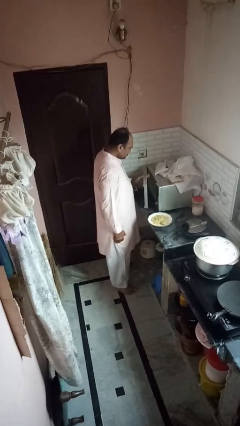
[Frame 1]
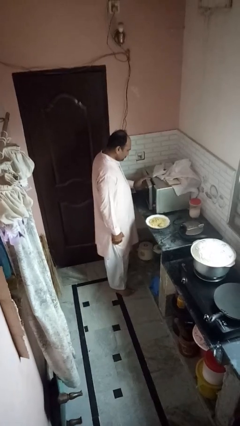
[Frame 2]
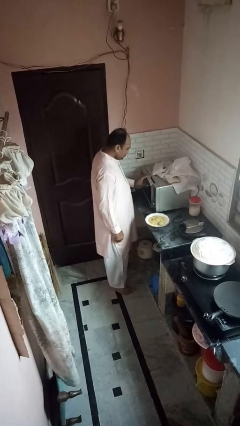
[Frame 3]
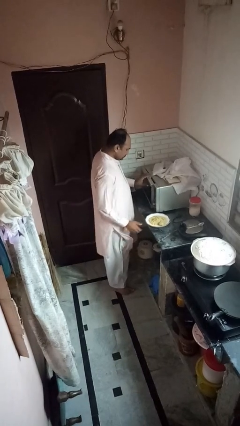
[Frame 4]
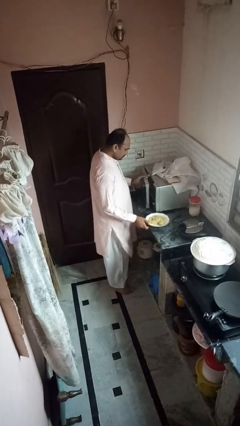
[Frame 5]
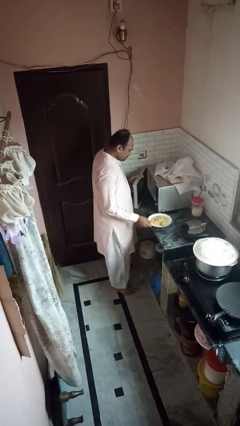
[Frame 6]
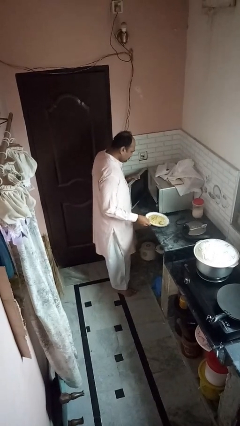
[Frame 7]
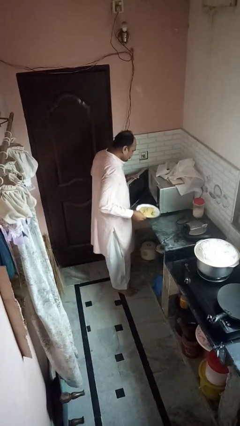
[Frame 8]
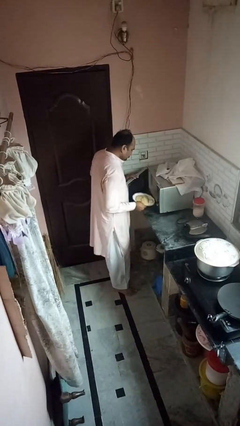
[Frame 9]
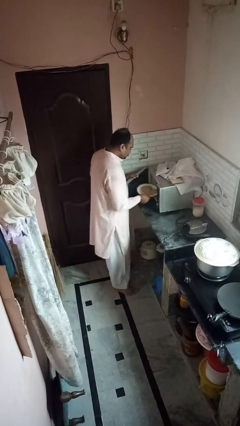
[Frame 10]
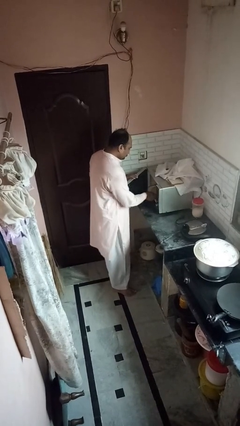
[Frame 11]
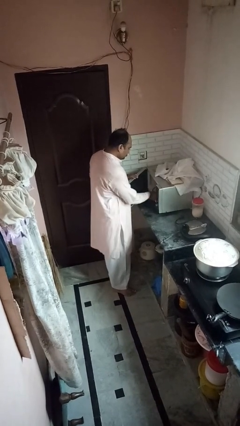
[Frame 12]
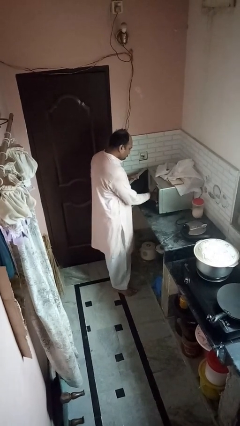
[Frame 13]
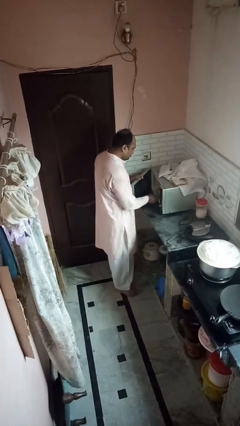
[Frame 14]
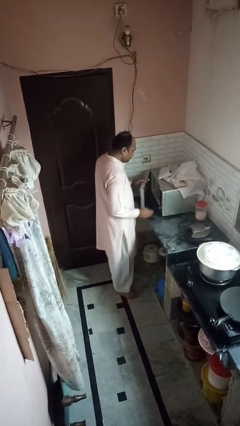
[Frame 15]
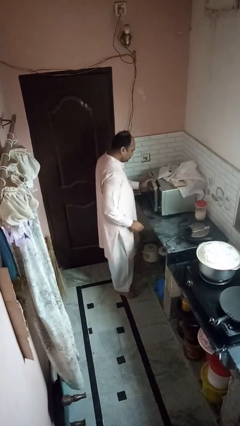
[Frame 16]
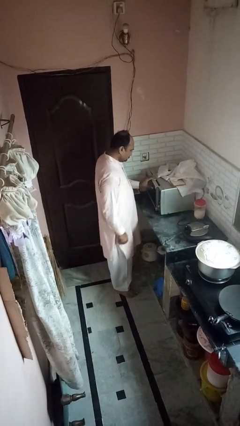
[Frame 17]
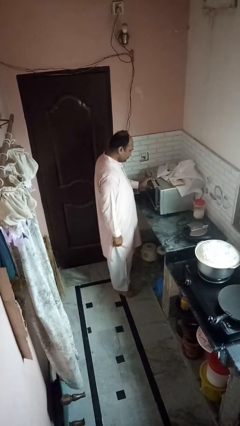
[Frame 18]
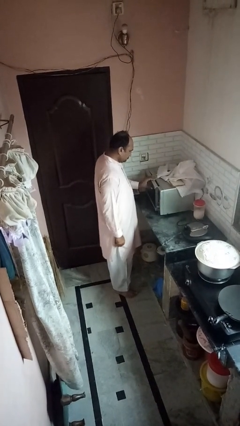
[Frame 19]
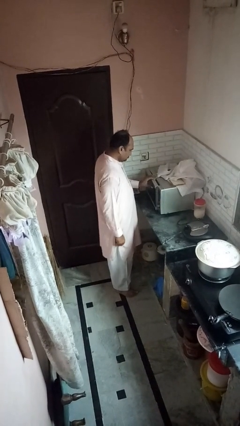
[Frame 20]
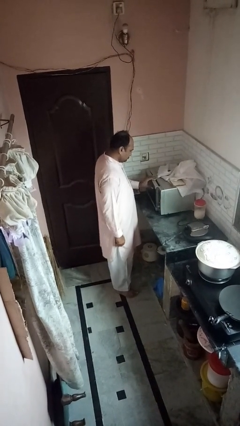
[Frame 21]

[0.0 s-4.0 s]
person puts object into oven

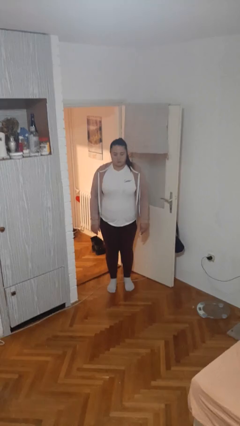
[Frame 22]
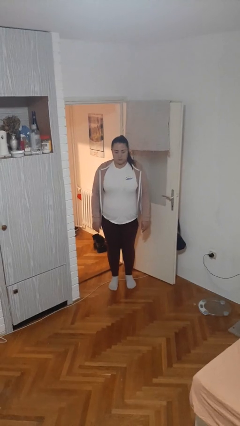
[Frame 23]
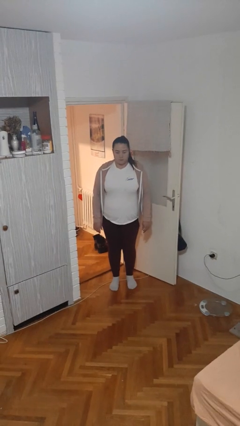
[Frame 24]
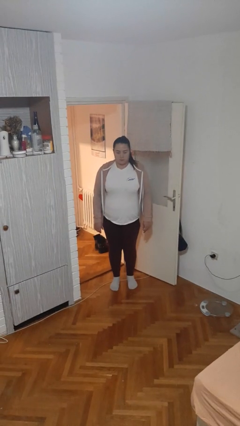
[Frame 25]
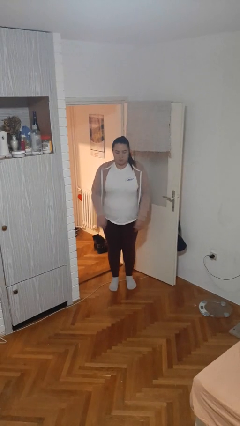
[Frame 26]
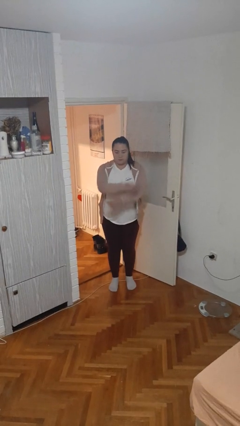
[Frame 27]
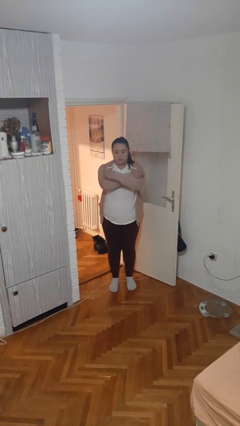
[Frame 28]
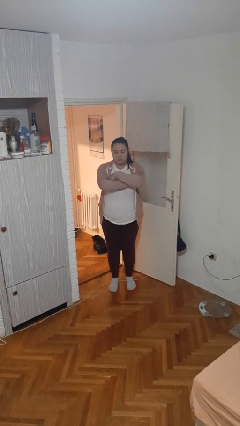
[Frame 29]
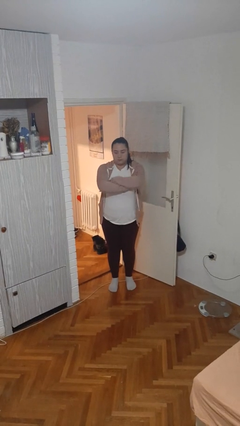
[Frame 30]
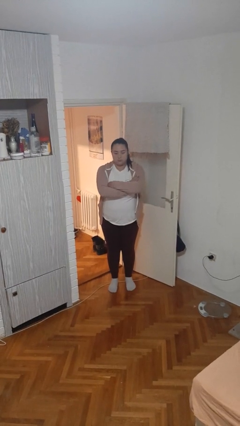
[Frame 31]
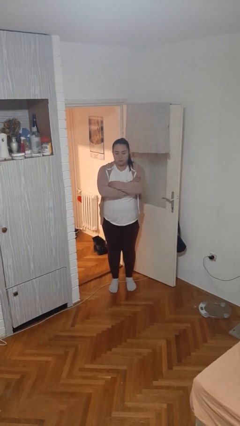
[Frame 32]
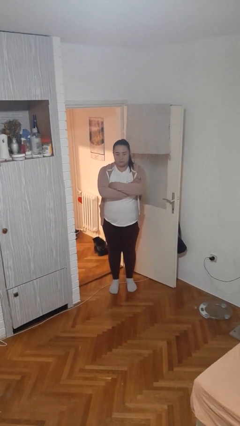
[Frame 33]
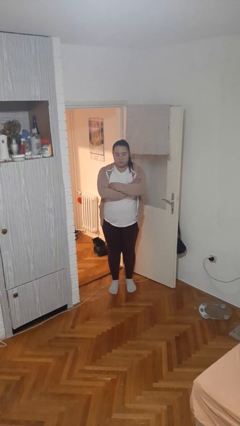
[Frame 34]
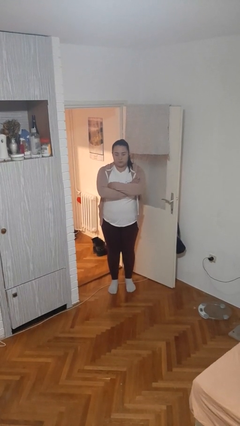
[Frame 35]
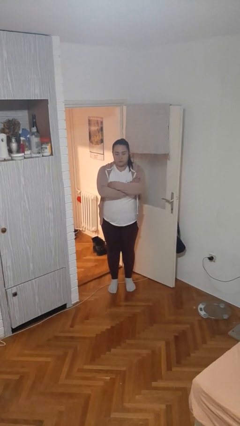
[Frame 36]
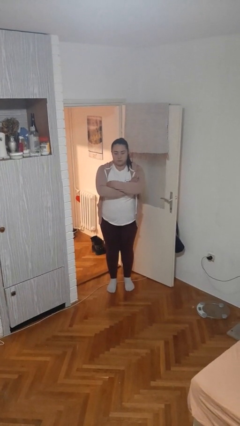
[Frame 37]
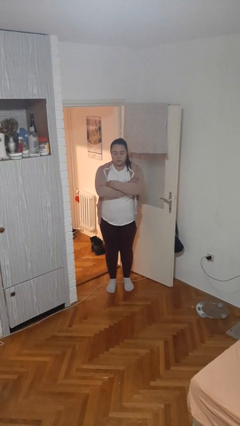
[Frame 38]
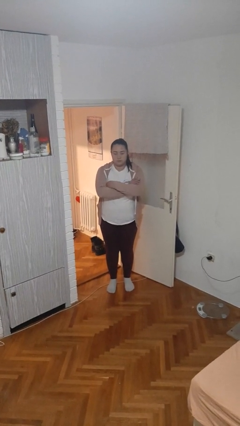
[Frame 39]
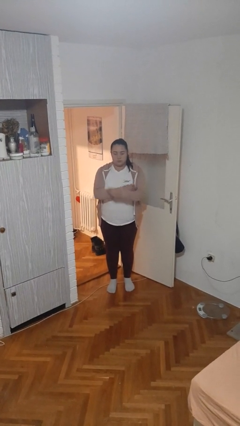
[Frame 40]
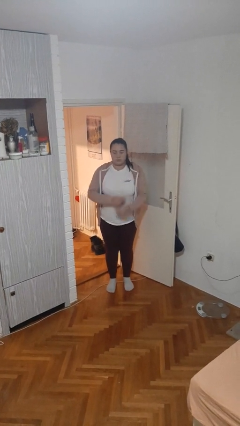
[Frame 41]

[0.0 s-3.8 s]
person crosses arms

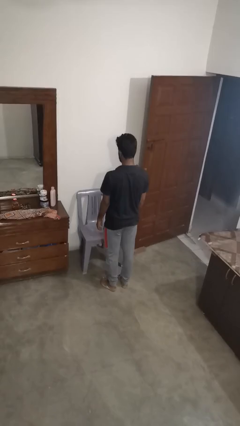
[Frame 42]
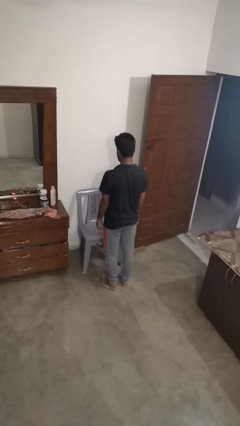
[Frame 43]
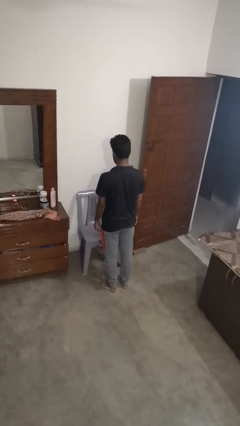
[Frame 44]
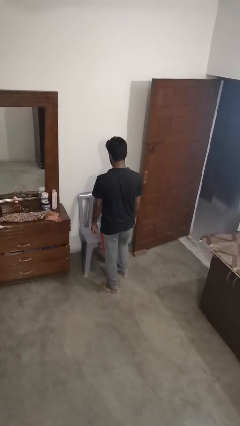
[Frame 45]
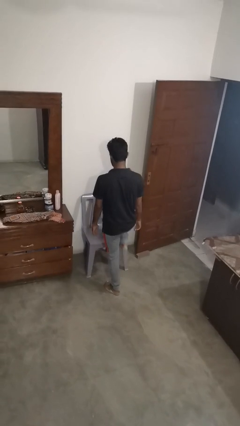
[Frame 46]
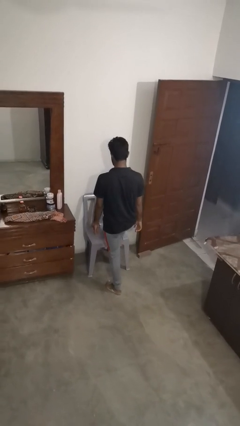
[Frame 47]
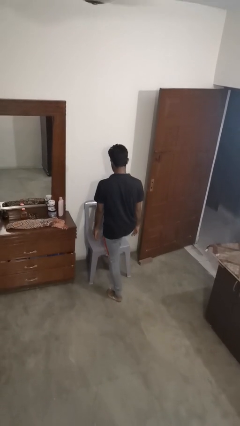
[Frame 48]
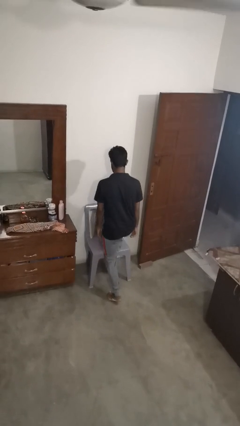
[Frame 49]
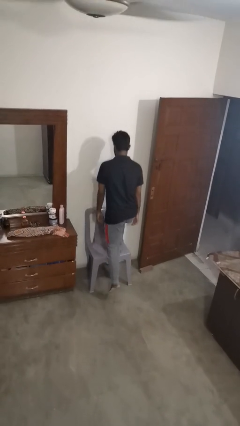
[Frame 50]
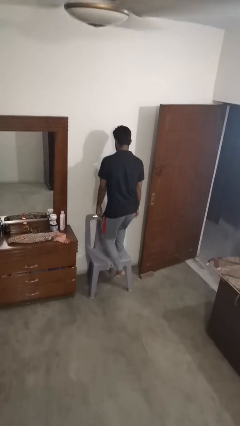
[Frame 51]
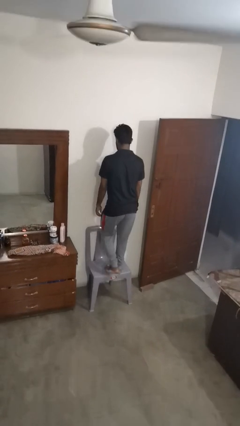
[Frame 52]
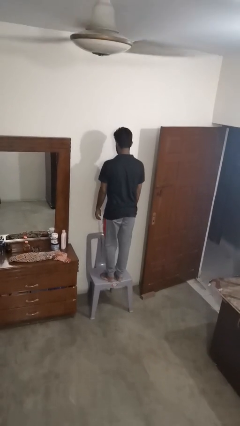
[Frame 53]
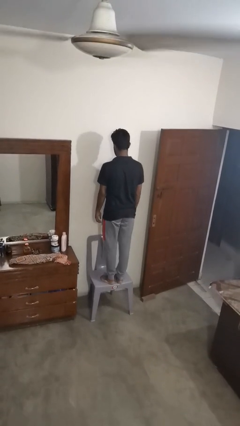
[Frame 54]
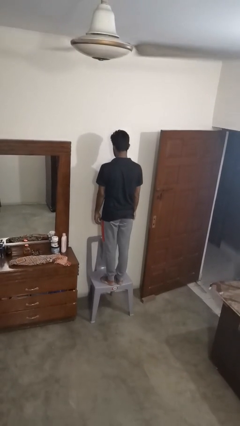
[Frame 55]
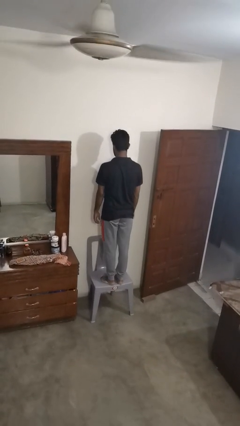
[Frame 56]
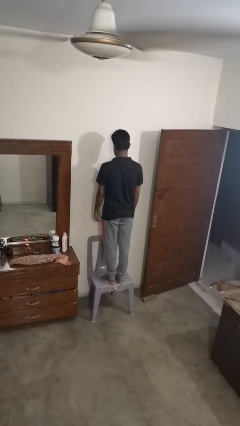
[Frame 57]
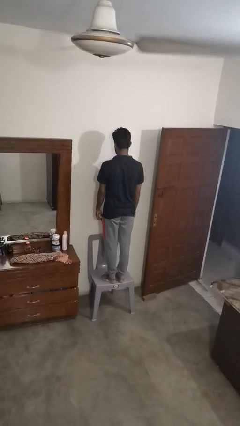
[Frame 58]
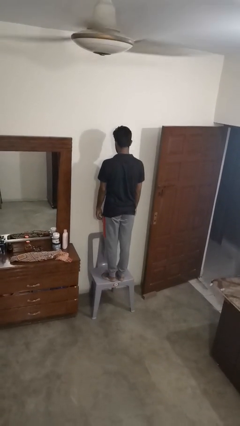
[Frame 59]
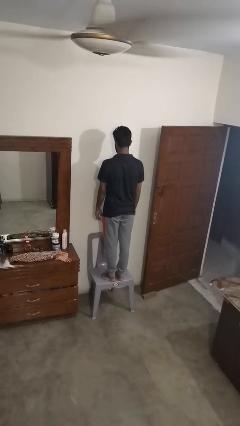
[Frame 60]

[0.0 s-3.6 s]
person climbs on chair

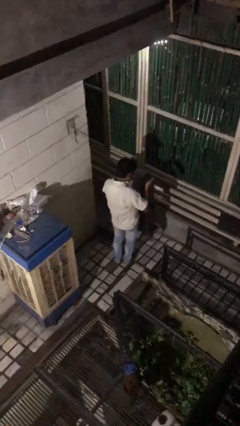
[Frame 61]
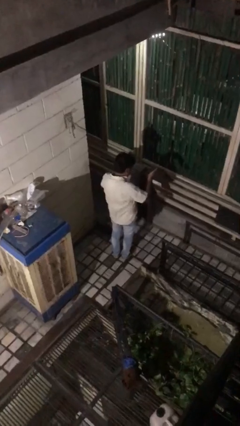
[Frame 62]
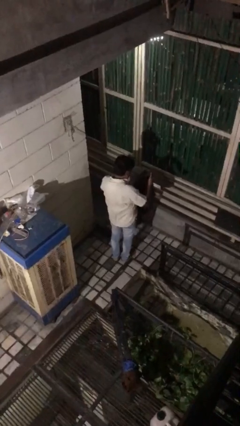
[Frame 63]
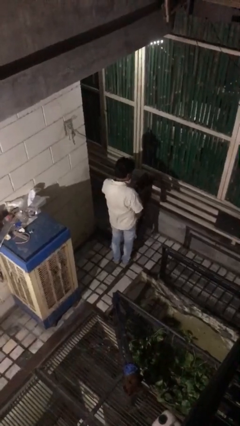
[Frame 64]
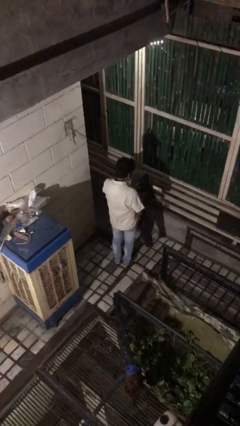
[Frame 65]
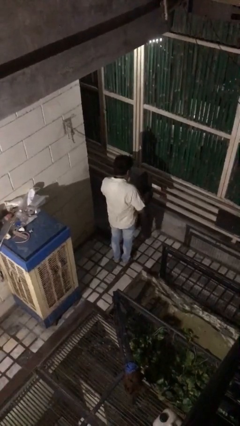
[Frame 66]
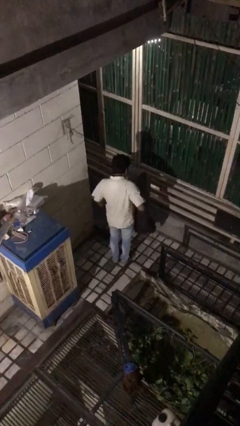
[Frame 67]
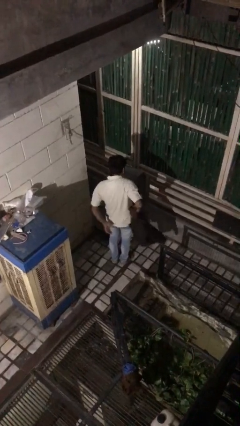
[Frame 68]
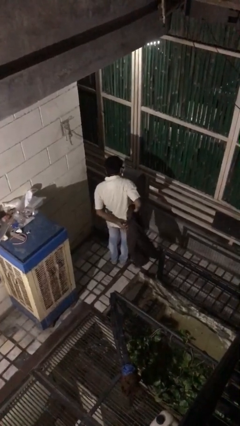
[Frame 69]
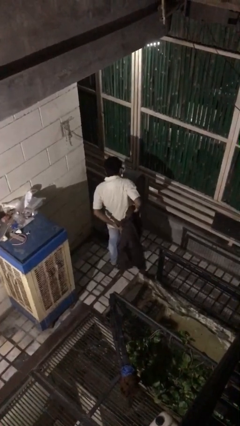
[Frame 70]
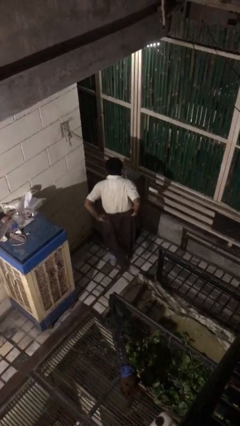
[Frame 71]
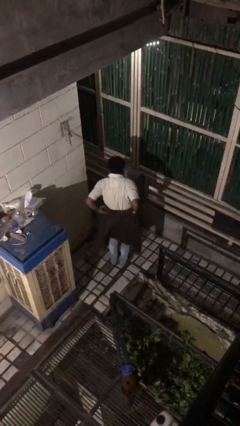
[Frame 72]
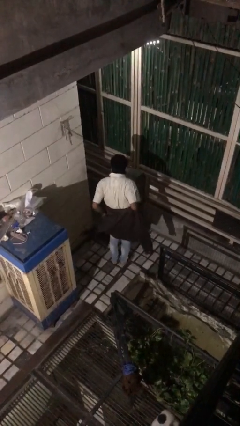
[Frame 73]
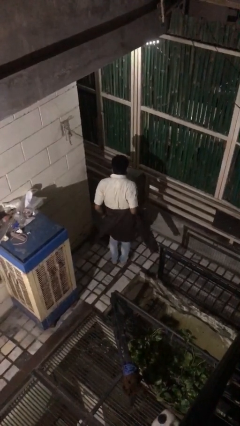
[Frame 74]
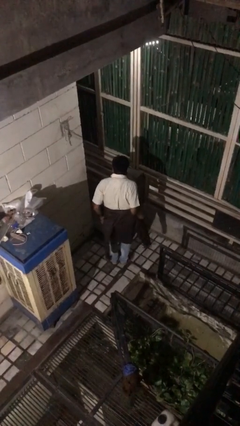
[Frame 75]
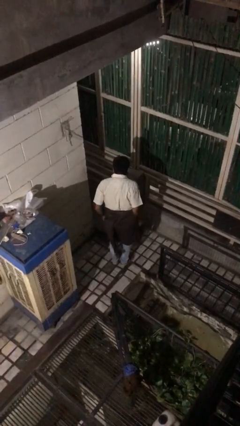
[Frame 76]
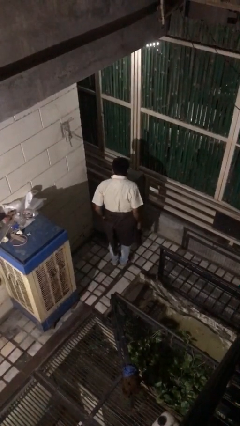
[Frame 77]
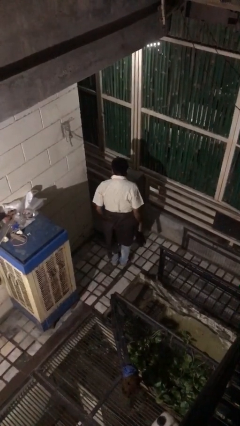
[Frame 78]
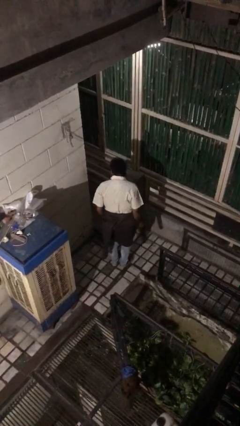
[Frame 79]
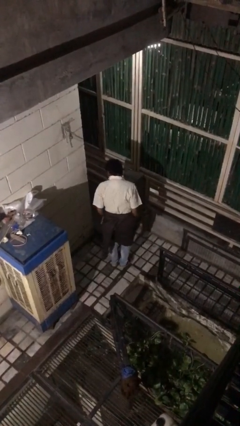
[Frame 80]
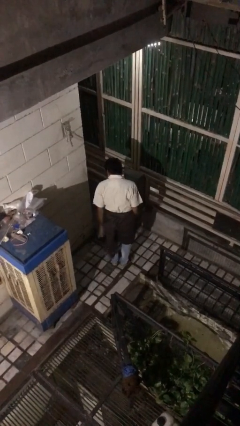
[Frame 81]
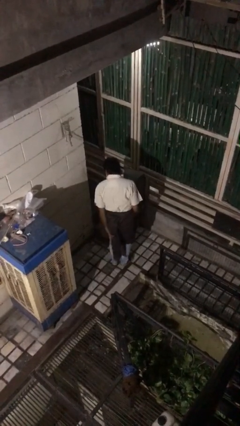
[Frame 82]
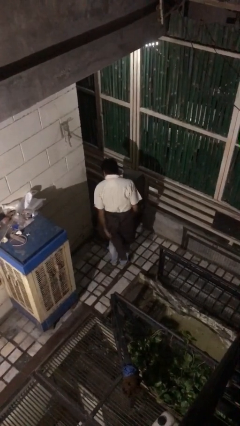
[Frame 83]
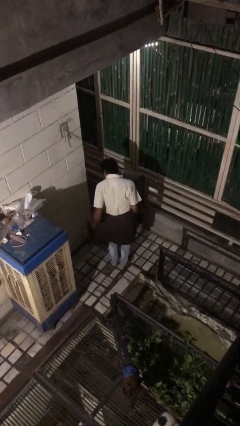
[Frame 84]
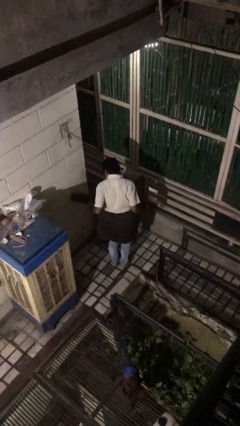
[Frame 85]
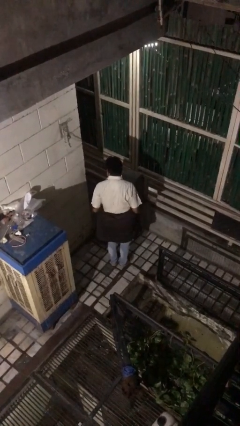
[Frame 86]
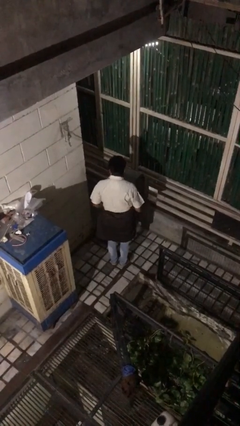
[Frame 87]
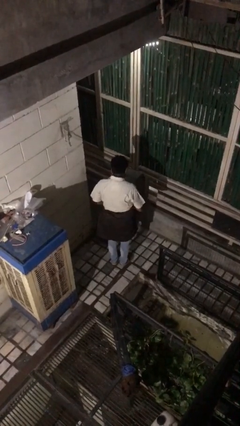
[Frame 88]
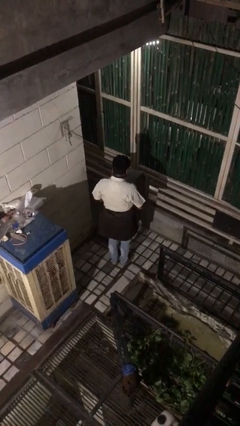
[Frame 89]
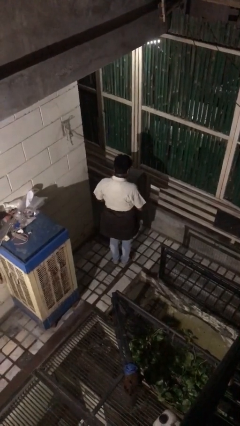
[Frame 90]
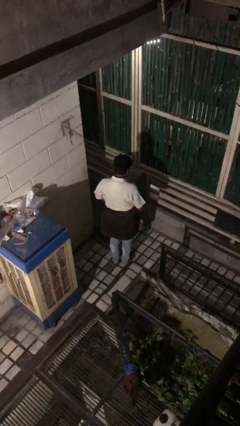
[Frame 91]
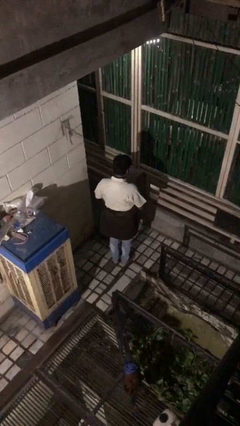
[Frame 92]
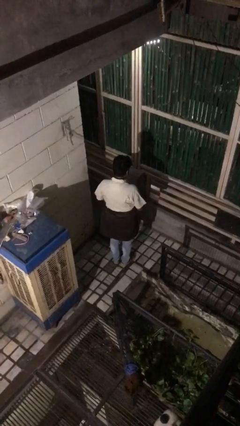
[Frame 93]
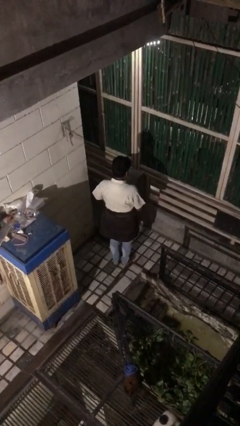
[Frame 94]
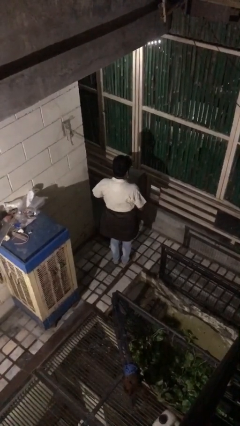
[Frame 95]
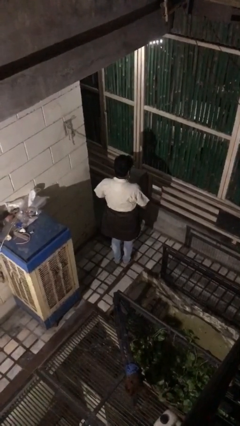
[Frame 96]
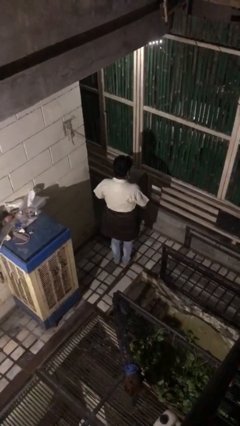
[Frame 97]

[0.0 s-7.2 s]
person ties jacket around waist
